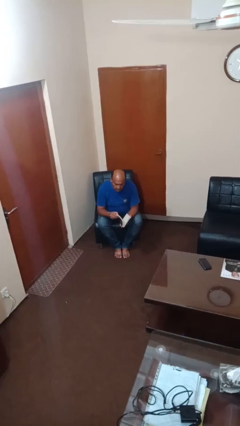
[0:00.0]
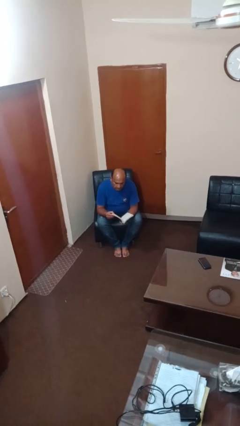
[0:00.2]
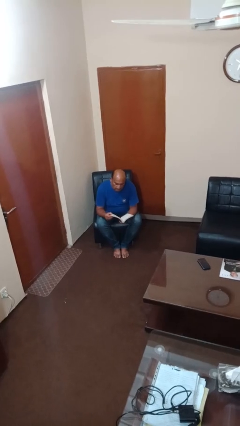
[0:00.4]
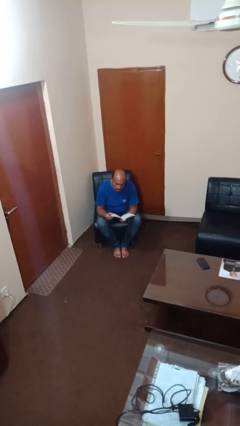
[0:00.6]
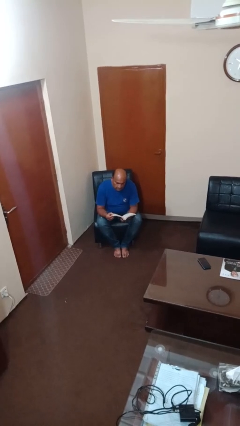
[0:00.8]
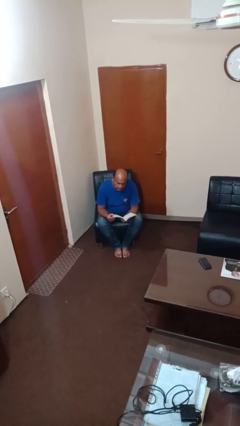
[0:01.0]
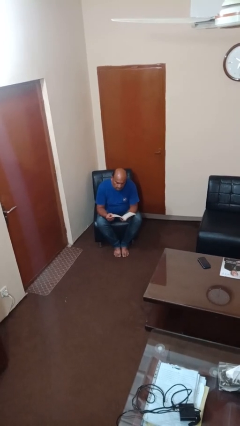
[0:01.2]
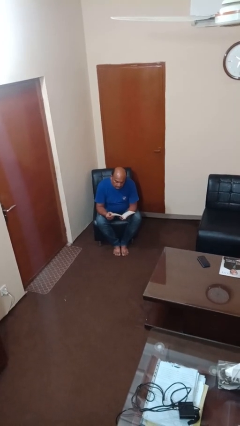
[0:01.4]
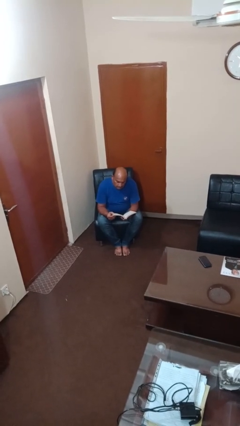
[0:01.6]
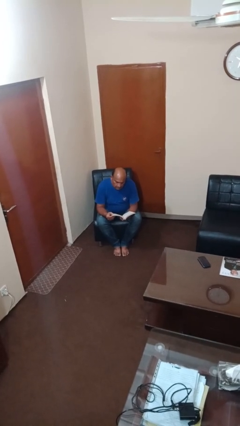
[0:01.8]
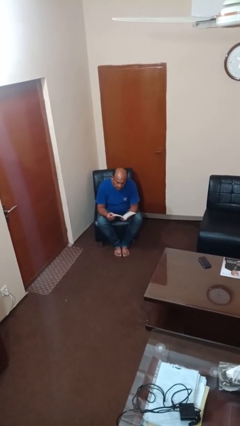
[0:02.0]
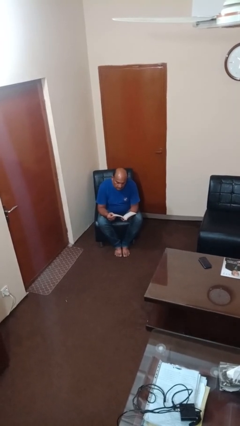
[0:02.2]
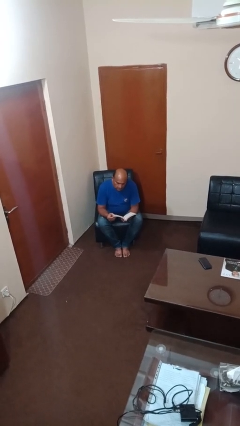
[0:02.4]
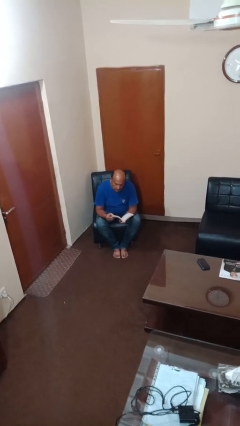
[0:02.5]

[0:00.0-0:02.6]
person reads book

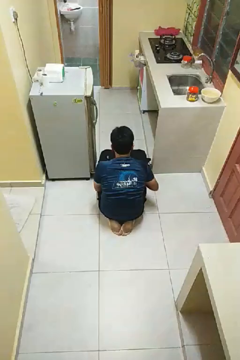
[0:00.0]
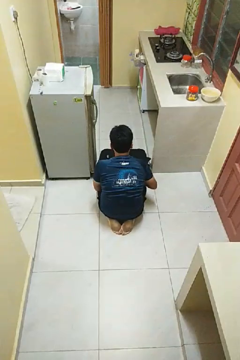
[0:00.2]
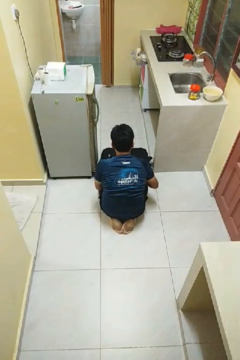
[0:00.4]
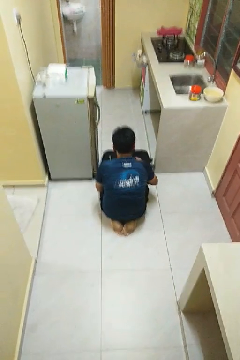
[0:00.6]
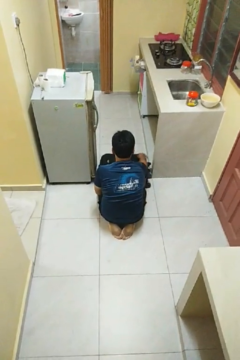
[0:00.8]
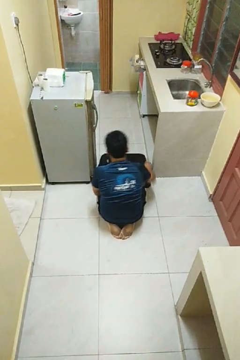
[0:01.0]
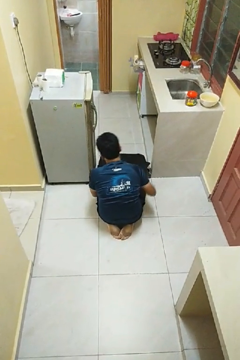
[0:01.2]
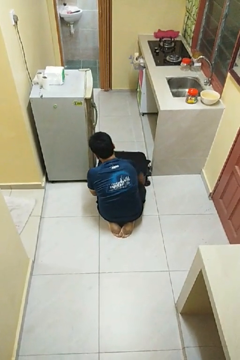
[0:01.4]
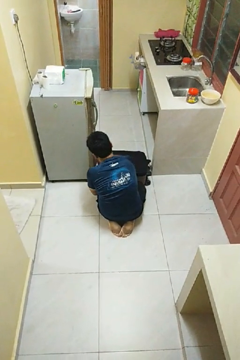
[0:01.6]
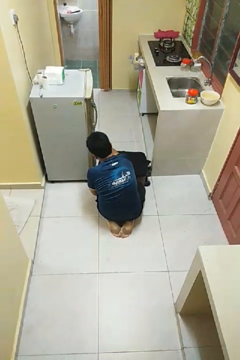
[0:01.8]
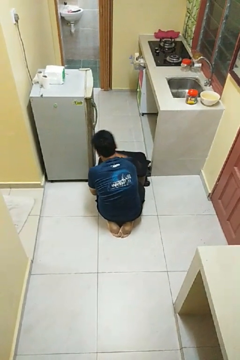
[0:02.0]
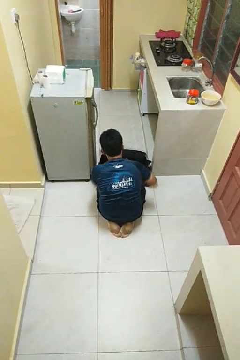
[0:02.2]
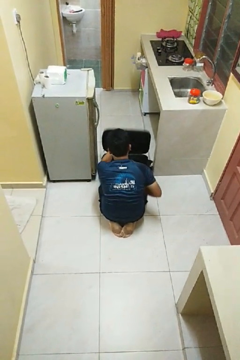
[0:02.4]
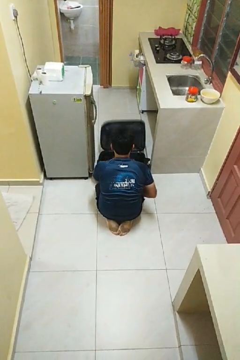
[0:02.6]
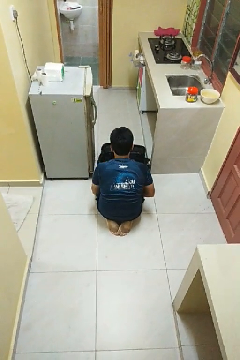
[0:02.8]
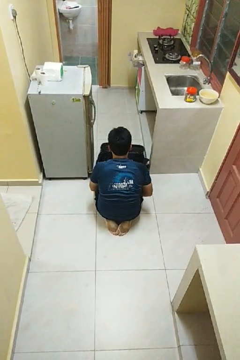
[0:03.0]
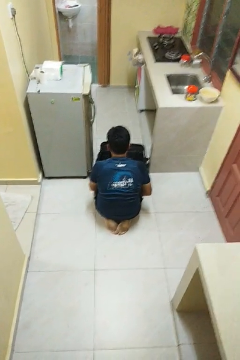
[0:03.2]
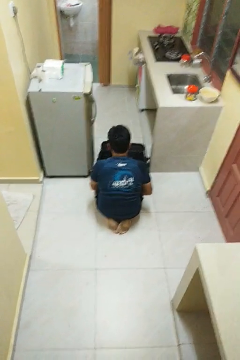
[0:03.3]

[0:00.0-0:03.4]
person opens suitcase

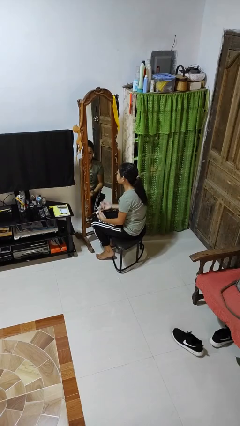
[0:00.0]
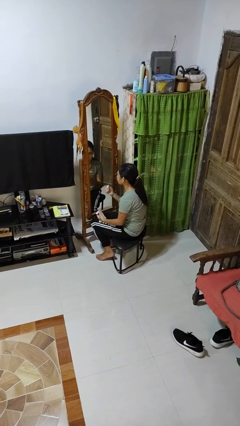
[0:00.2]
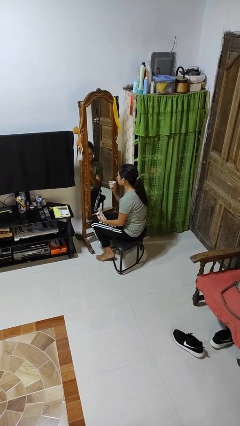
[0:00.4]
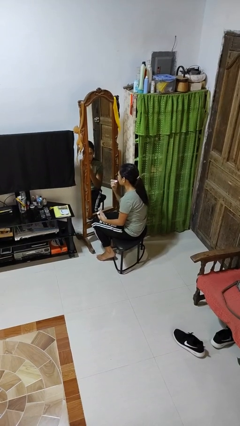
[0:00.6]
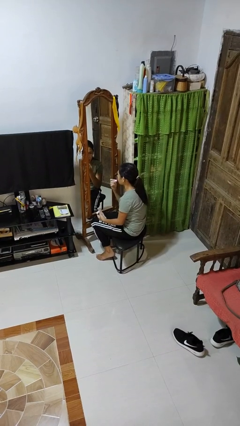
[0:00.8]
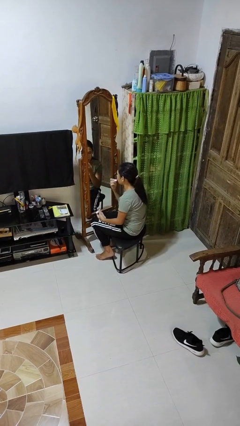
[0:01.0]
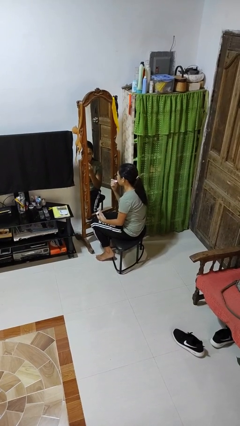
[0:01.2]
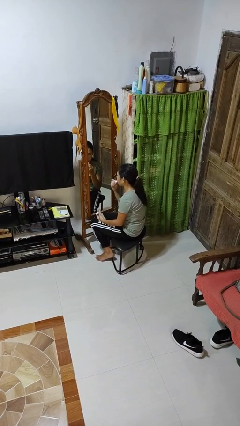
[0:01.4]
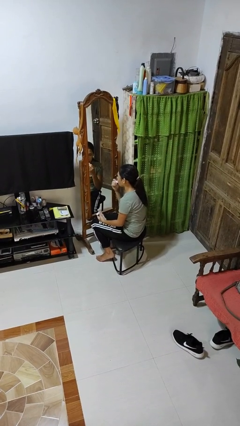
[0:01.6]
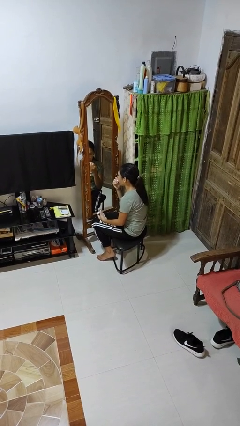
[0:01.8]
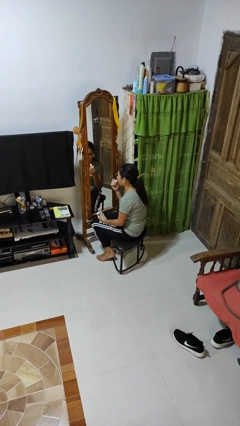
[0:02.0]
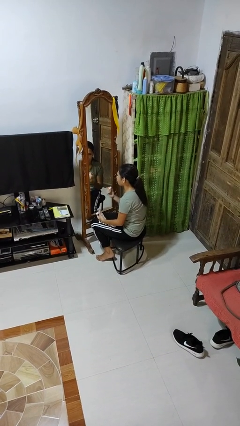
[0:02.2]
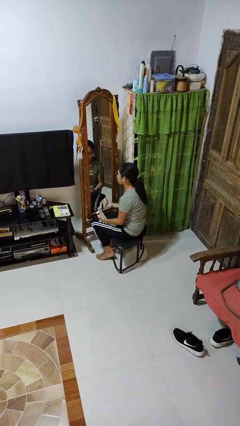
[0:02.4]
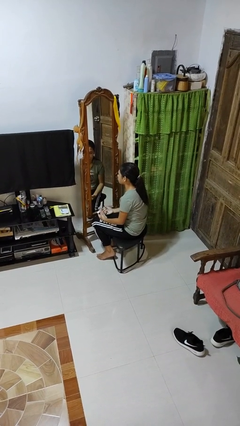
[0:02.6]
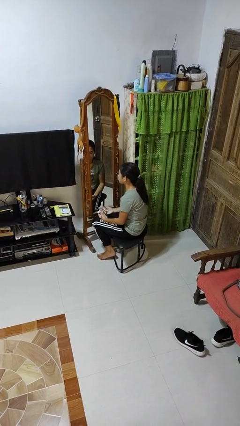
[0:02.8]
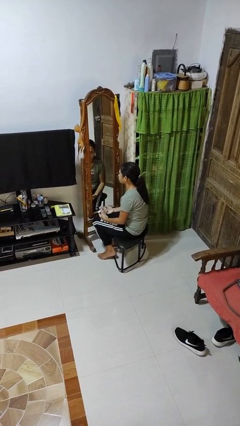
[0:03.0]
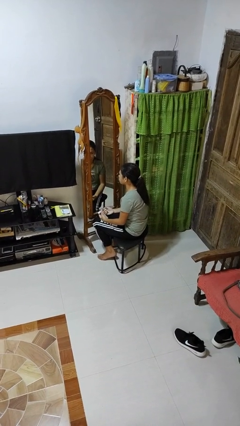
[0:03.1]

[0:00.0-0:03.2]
person applies lip makeup

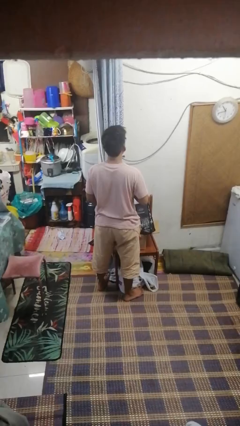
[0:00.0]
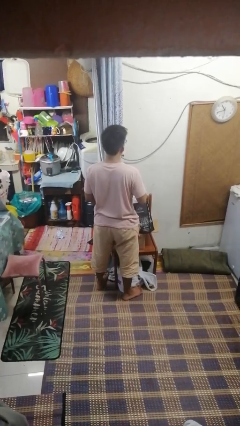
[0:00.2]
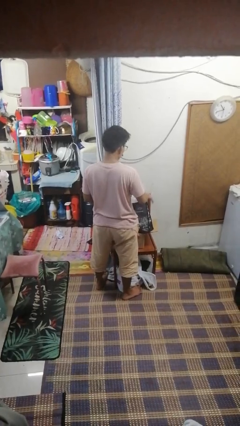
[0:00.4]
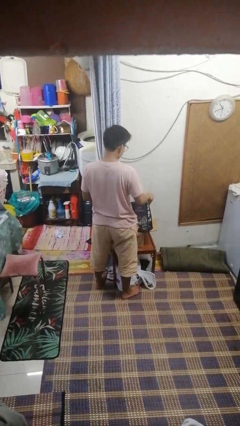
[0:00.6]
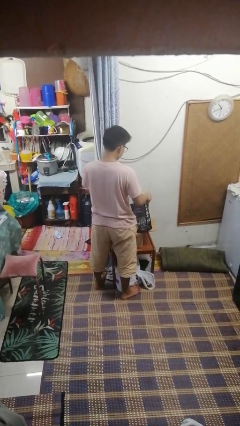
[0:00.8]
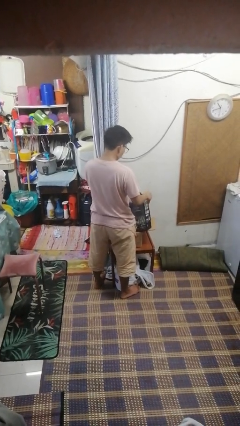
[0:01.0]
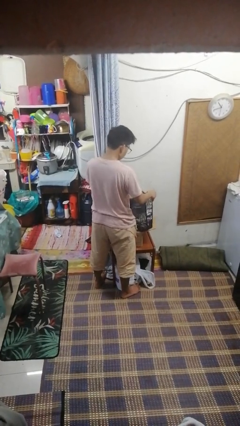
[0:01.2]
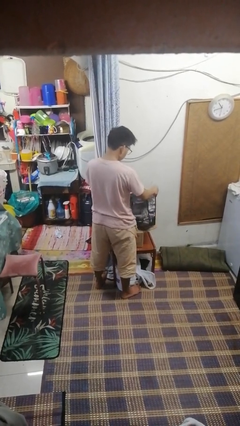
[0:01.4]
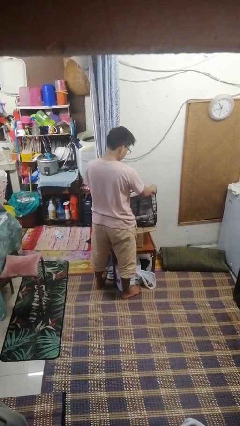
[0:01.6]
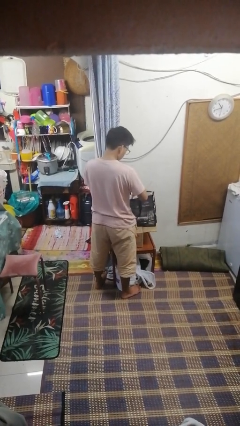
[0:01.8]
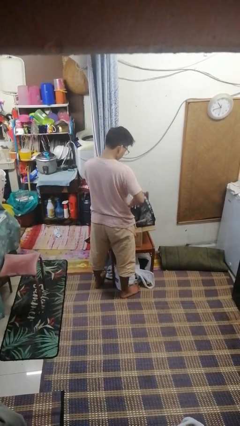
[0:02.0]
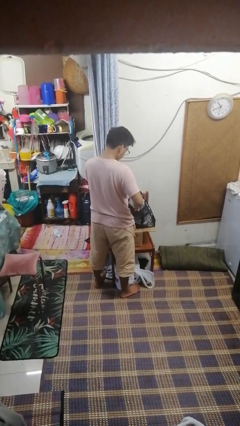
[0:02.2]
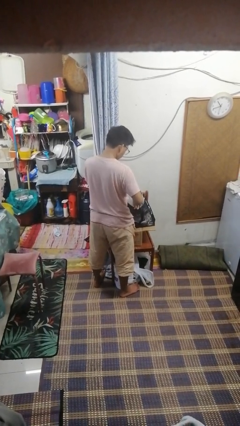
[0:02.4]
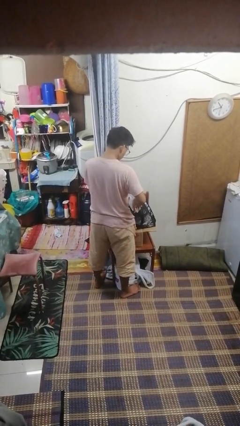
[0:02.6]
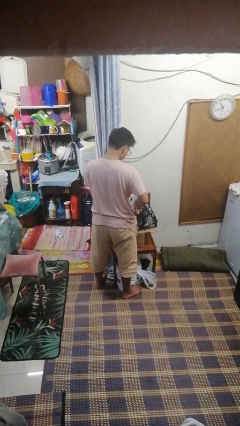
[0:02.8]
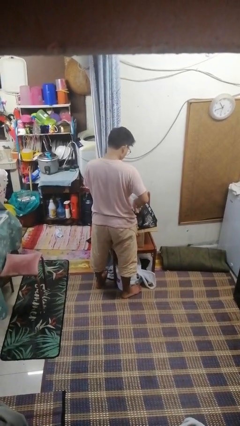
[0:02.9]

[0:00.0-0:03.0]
person searches in bag

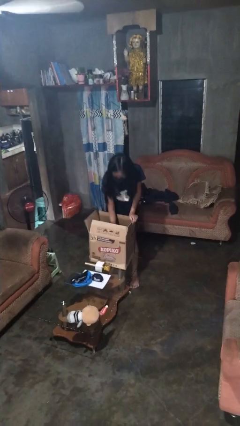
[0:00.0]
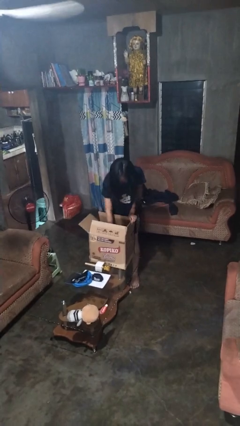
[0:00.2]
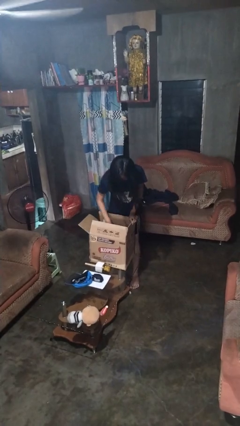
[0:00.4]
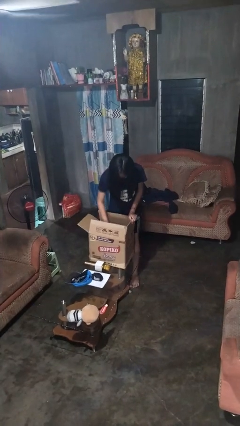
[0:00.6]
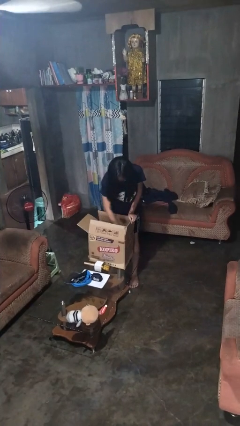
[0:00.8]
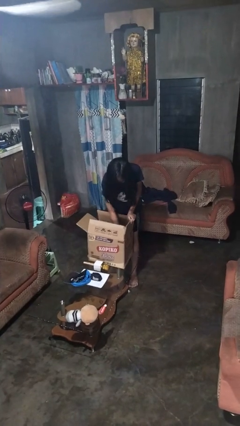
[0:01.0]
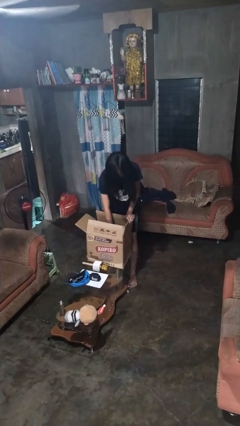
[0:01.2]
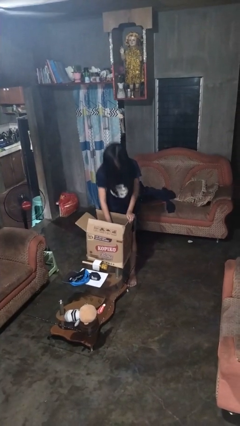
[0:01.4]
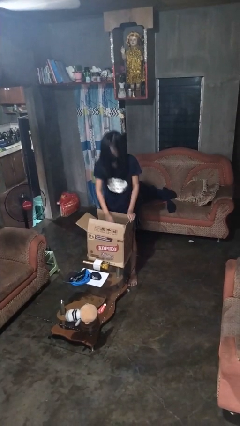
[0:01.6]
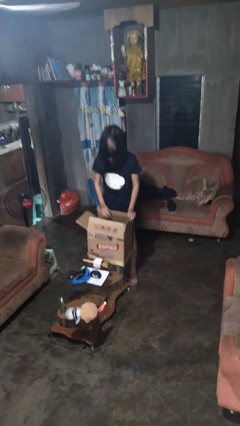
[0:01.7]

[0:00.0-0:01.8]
person searches in box

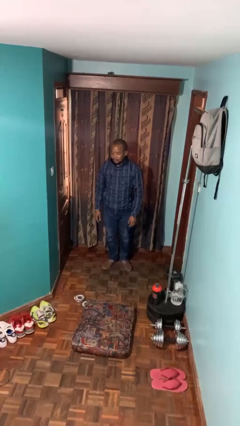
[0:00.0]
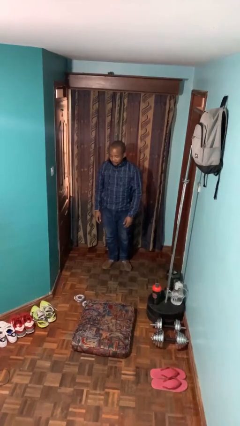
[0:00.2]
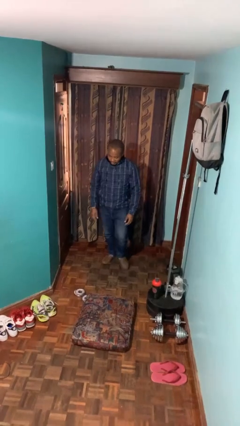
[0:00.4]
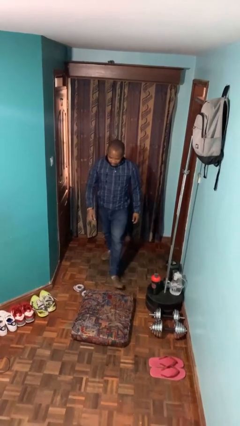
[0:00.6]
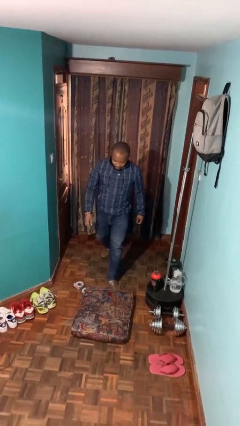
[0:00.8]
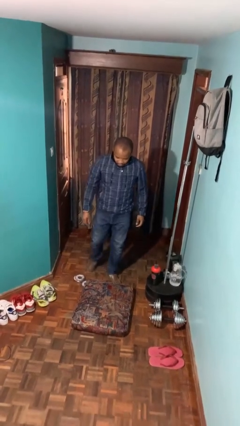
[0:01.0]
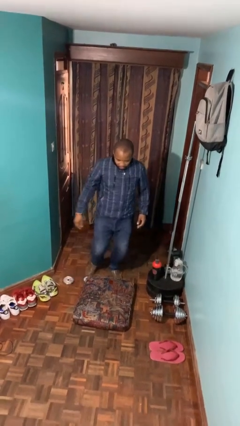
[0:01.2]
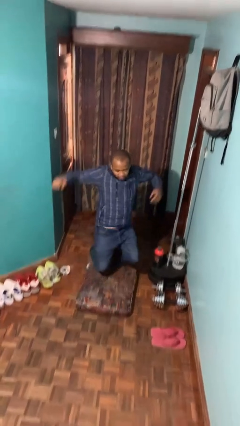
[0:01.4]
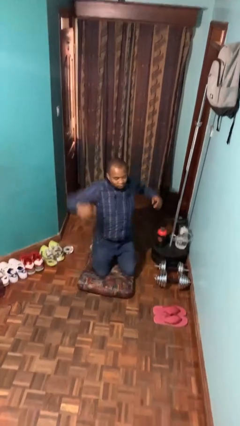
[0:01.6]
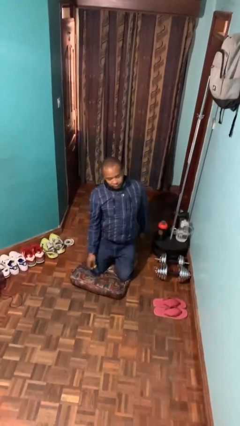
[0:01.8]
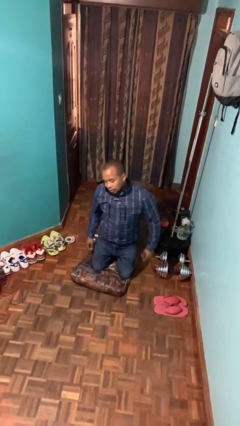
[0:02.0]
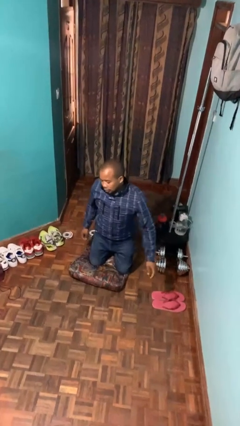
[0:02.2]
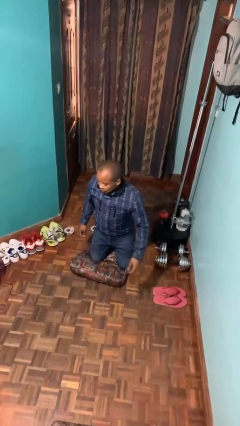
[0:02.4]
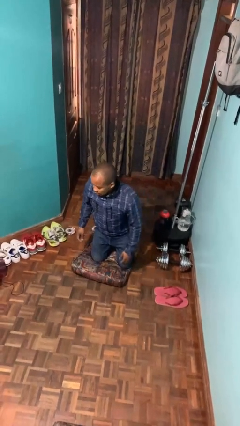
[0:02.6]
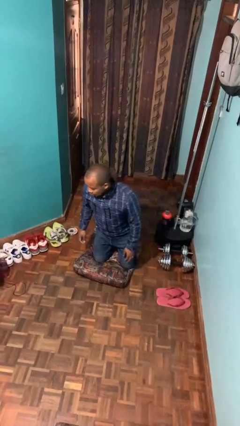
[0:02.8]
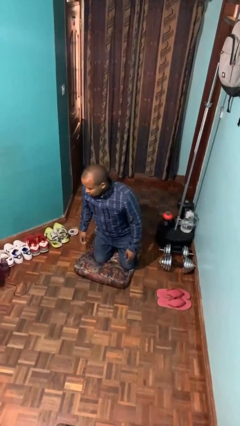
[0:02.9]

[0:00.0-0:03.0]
person trips on object on floor

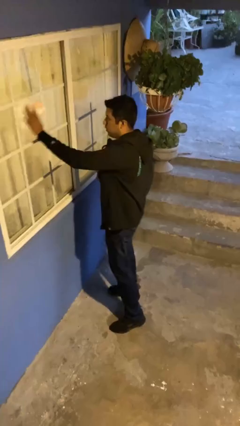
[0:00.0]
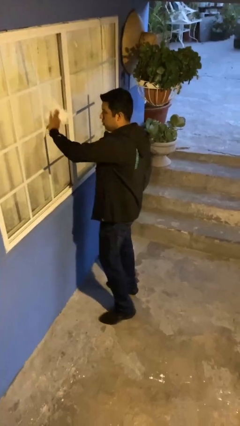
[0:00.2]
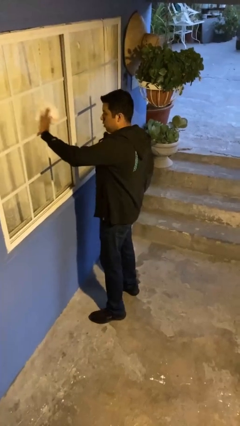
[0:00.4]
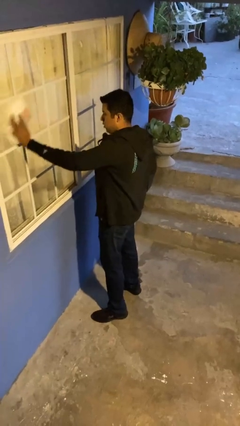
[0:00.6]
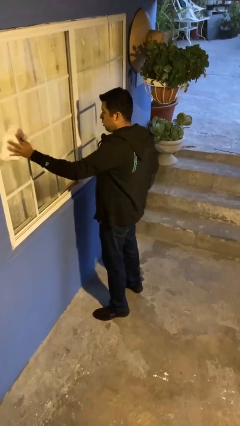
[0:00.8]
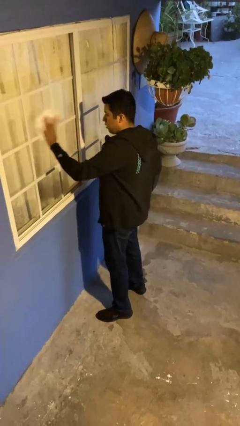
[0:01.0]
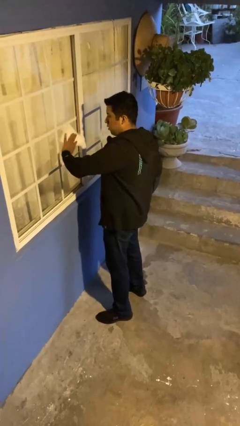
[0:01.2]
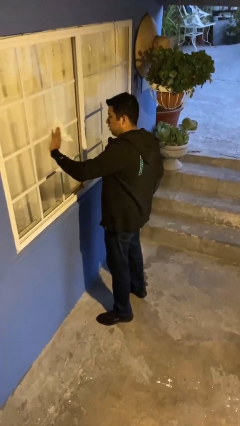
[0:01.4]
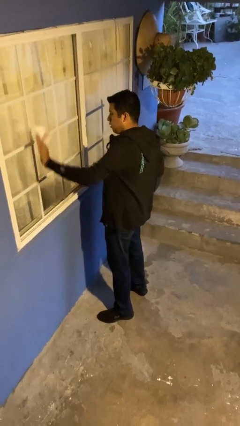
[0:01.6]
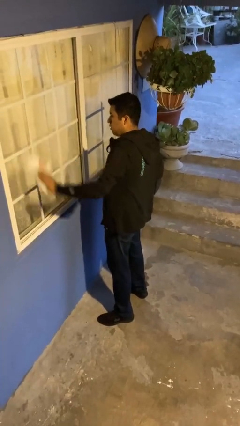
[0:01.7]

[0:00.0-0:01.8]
person washes window
